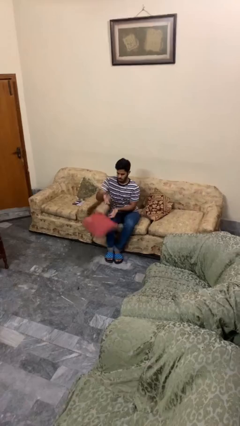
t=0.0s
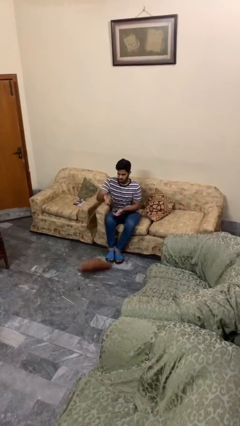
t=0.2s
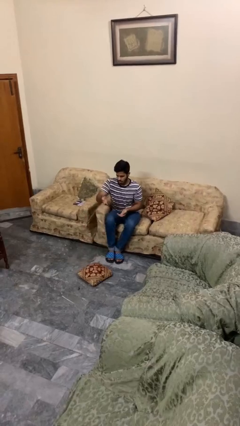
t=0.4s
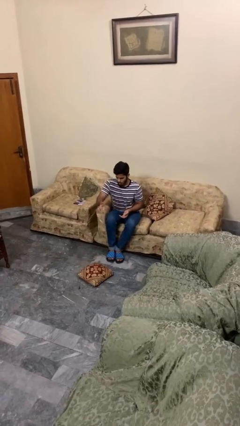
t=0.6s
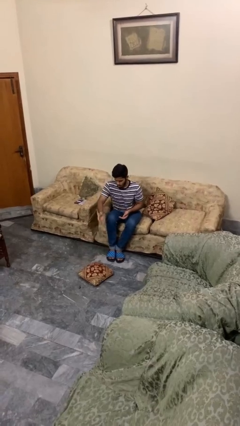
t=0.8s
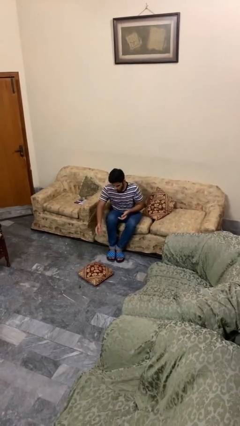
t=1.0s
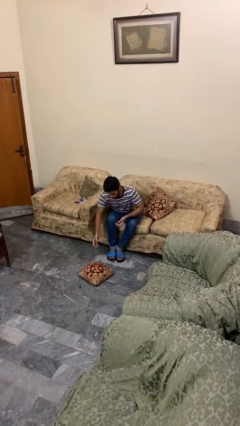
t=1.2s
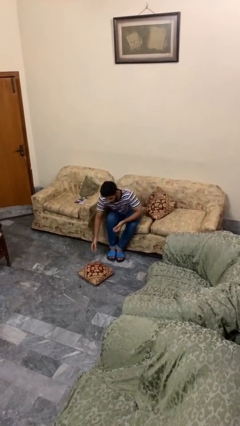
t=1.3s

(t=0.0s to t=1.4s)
person drops object

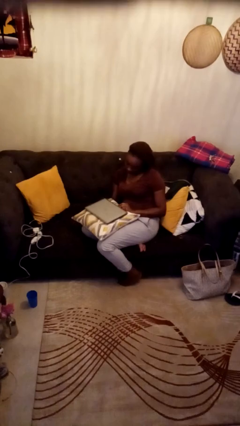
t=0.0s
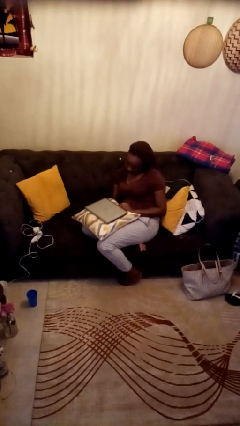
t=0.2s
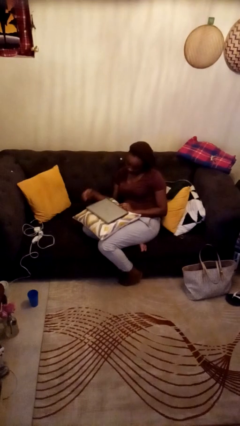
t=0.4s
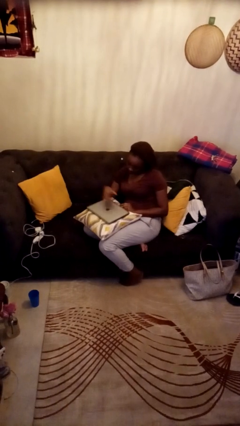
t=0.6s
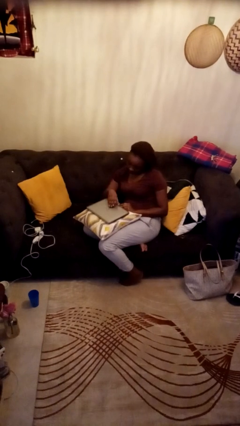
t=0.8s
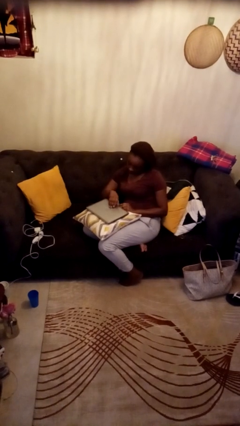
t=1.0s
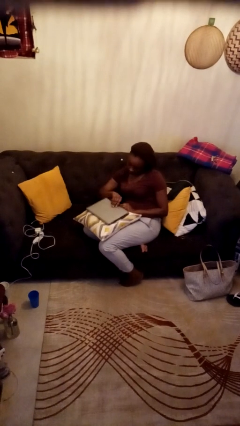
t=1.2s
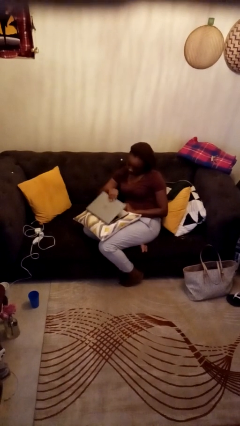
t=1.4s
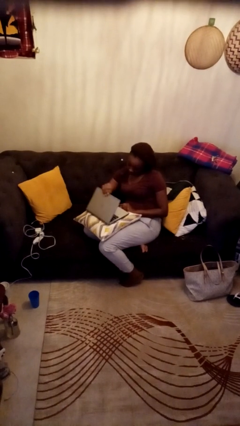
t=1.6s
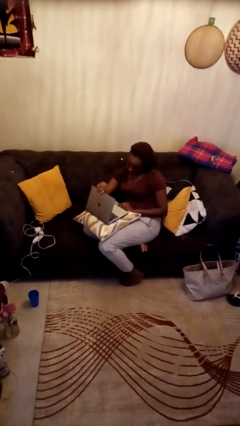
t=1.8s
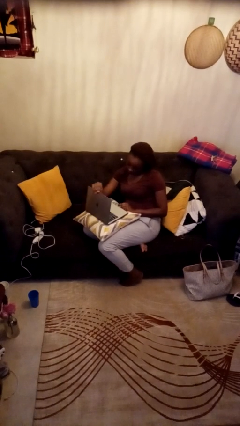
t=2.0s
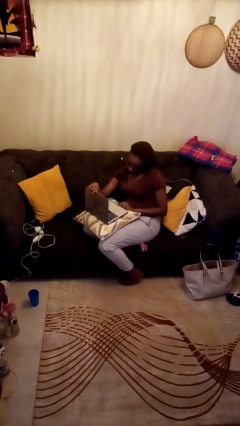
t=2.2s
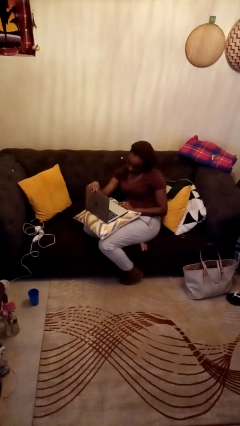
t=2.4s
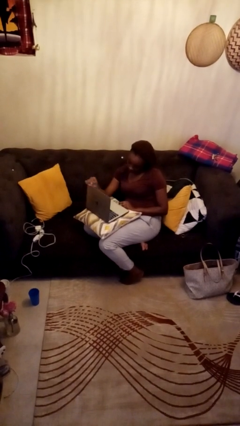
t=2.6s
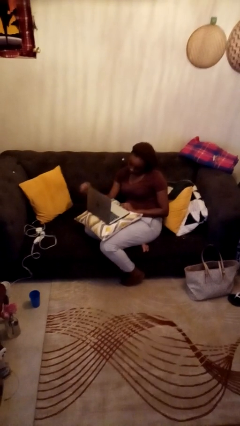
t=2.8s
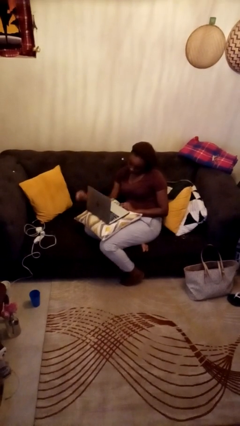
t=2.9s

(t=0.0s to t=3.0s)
person opens laptop

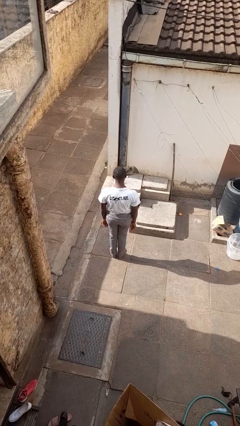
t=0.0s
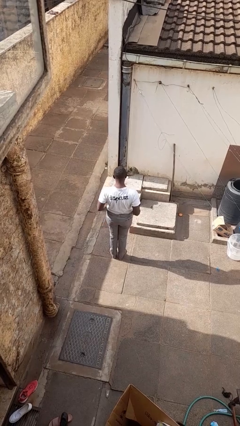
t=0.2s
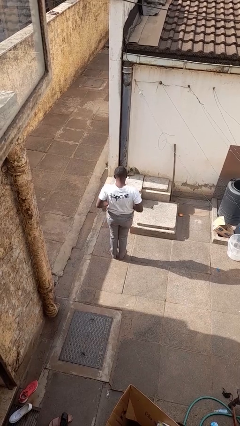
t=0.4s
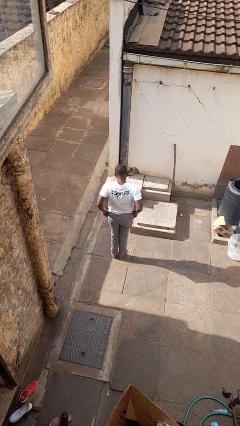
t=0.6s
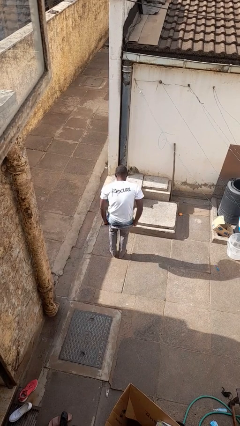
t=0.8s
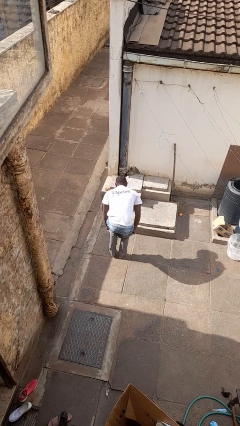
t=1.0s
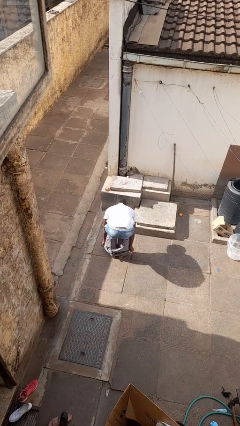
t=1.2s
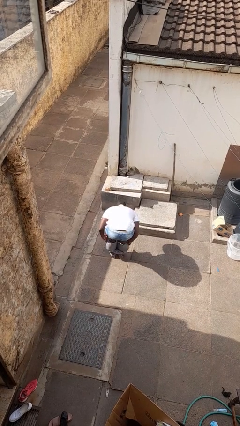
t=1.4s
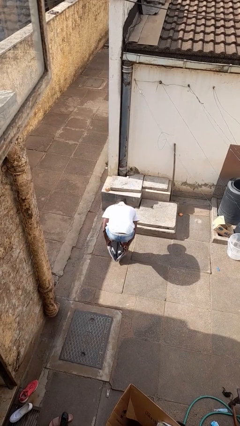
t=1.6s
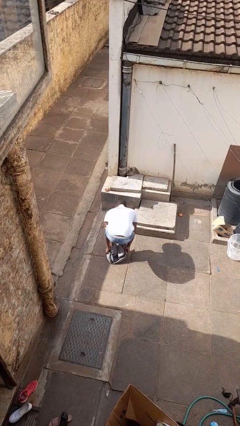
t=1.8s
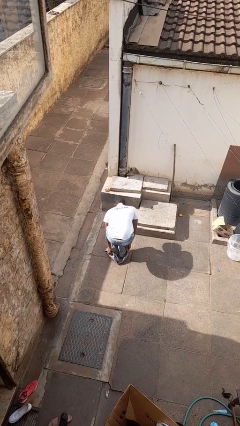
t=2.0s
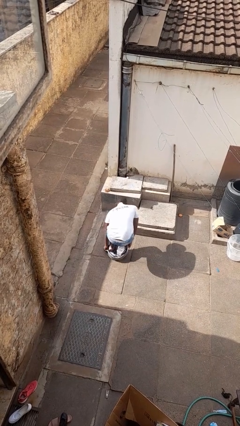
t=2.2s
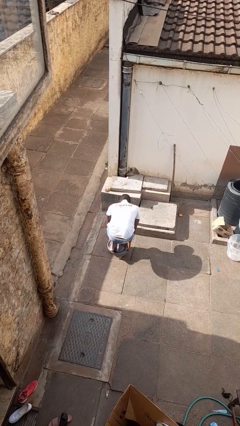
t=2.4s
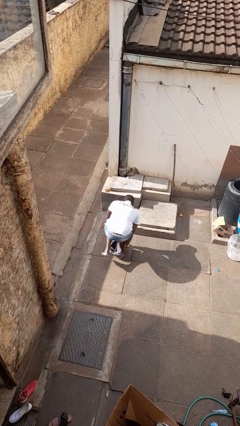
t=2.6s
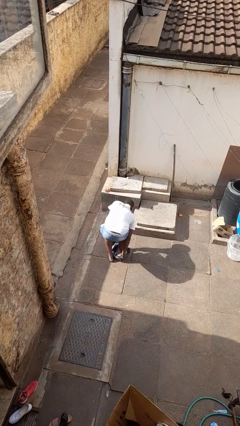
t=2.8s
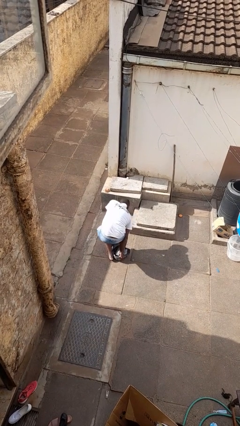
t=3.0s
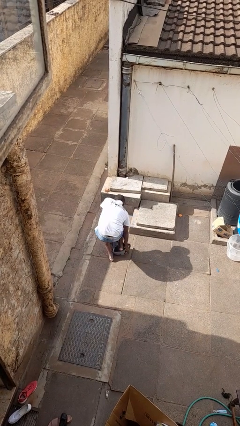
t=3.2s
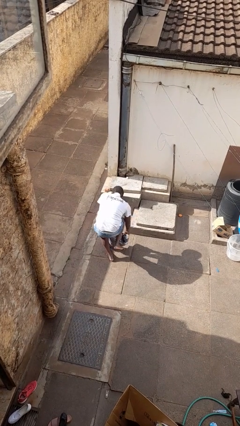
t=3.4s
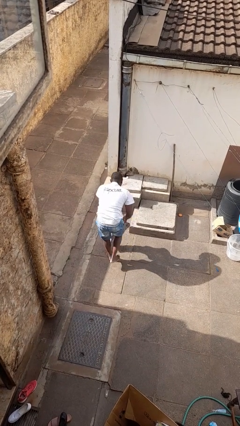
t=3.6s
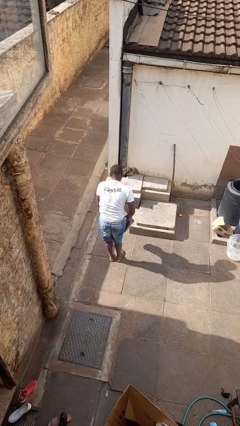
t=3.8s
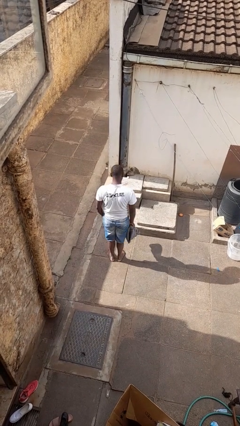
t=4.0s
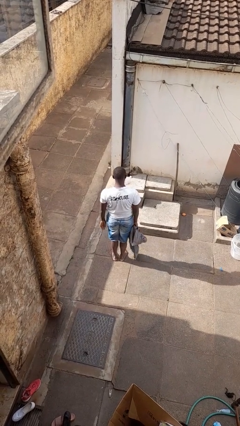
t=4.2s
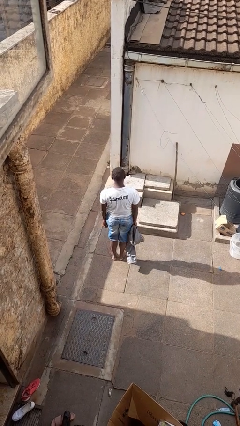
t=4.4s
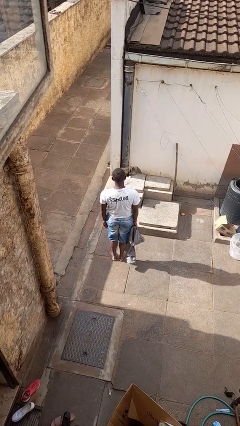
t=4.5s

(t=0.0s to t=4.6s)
person takes off pants

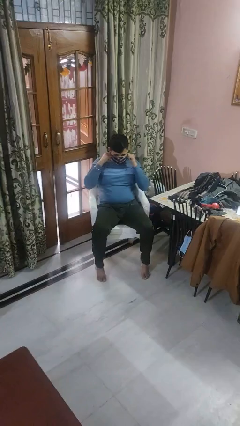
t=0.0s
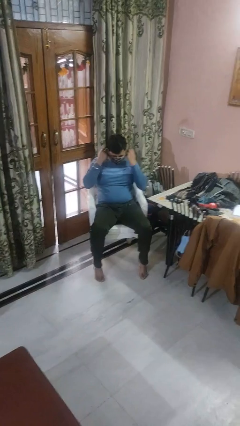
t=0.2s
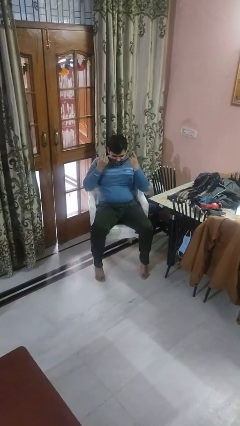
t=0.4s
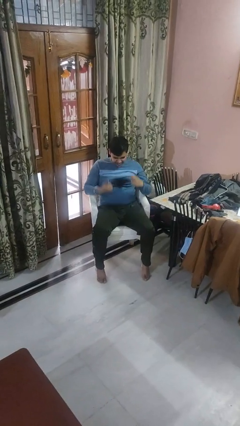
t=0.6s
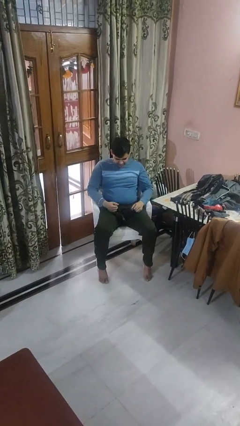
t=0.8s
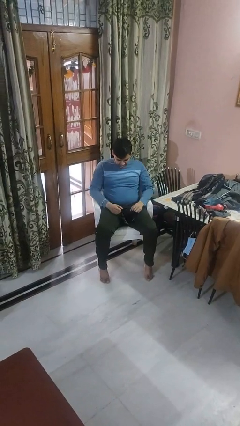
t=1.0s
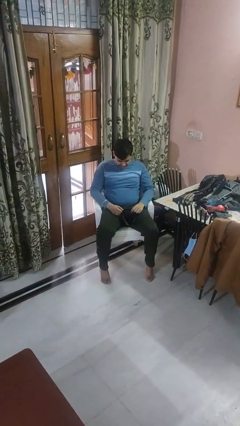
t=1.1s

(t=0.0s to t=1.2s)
person takes off facemask

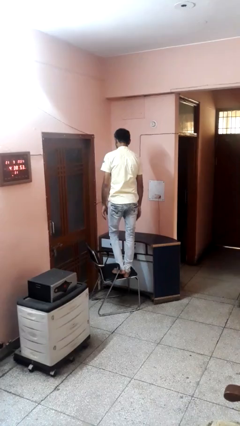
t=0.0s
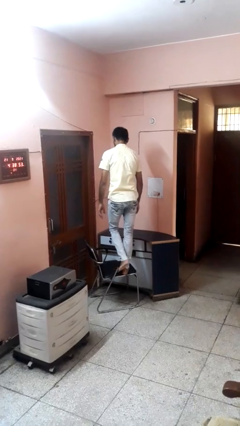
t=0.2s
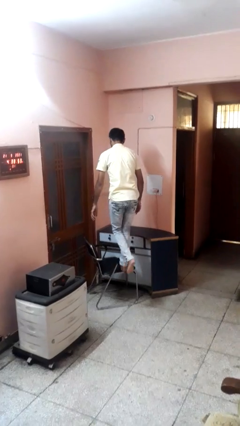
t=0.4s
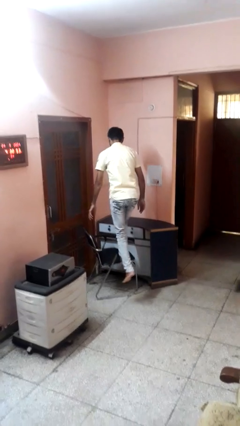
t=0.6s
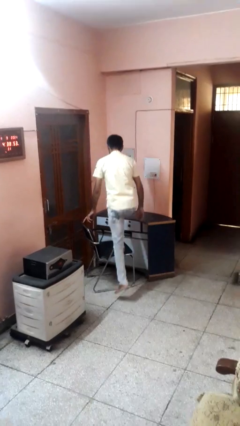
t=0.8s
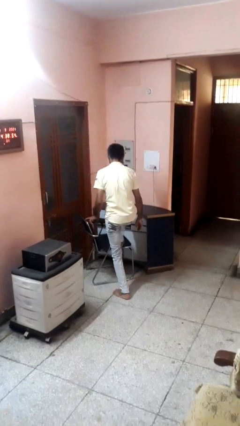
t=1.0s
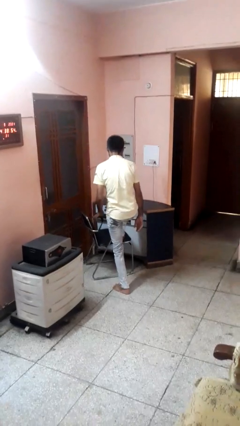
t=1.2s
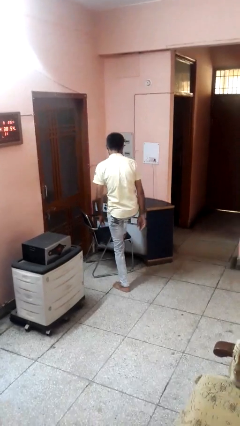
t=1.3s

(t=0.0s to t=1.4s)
person climbs off chair

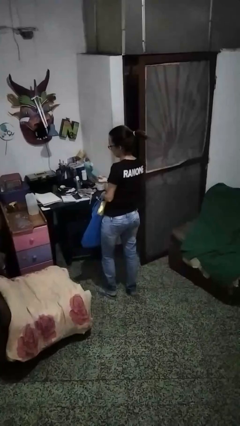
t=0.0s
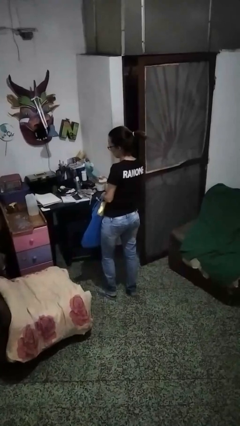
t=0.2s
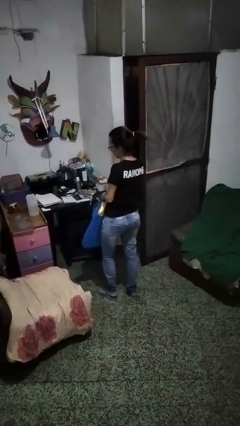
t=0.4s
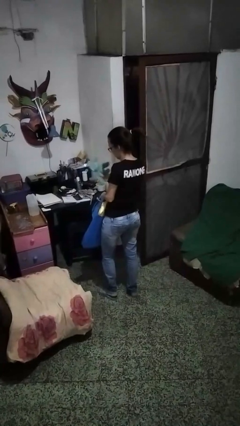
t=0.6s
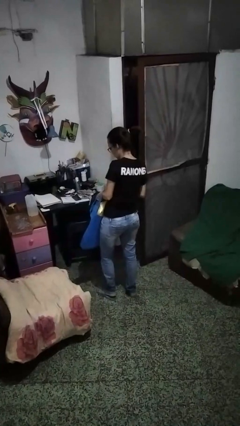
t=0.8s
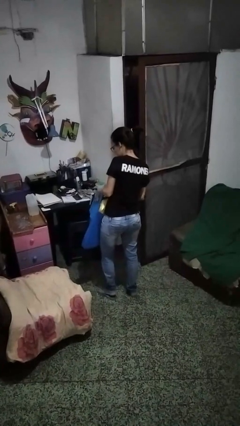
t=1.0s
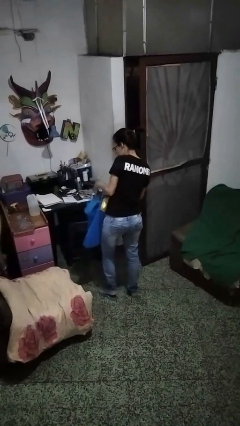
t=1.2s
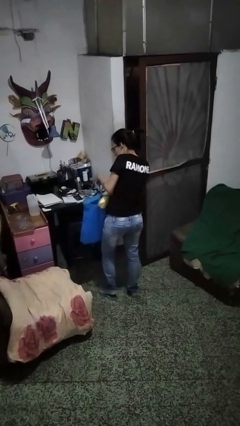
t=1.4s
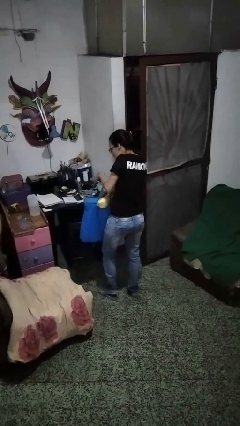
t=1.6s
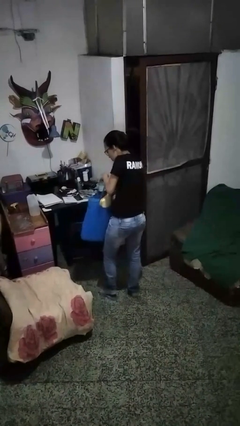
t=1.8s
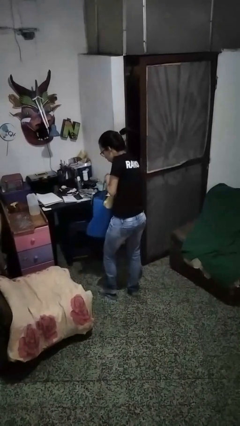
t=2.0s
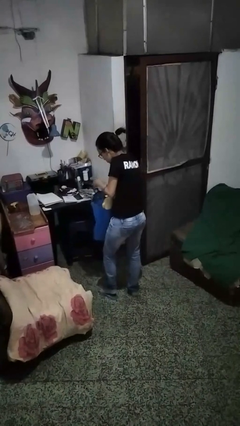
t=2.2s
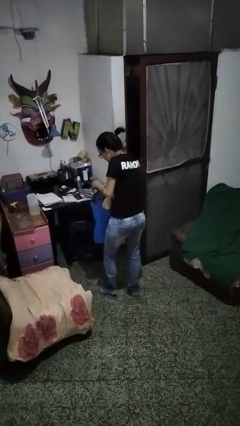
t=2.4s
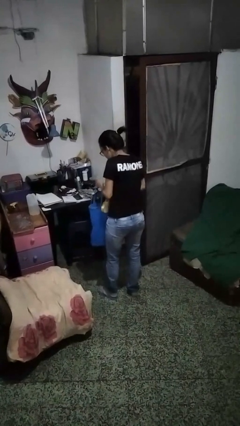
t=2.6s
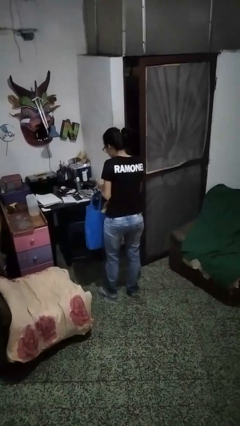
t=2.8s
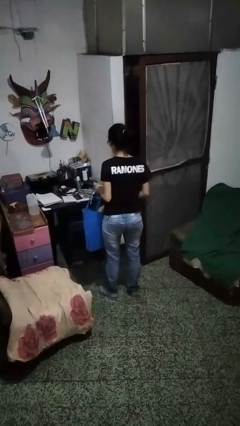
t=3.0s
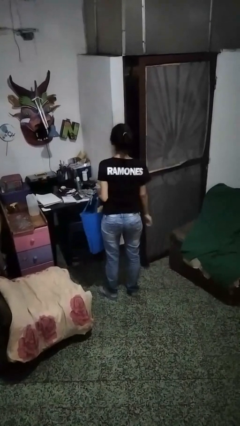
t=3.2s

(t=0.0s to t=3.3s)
person puts object into bag

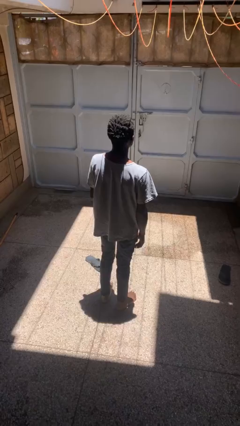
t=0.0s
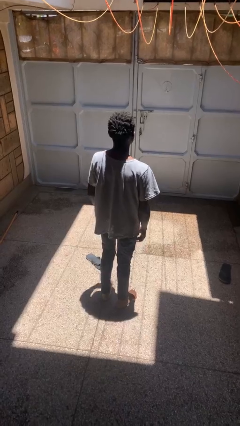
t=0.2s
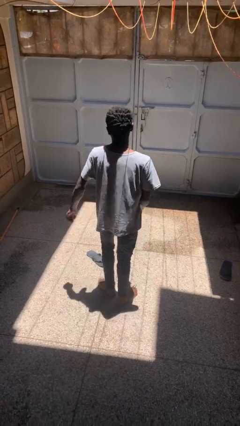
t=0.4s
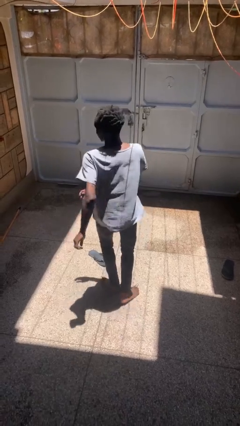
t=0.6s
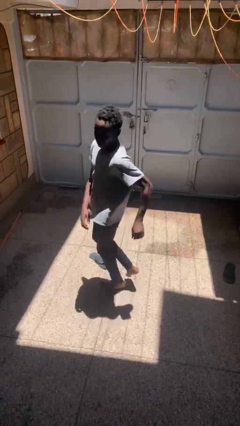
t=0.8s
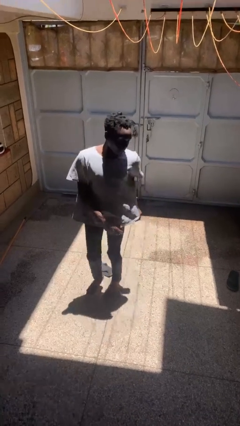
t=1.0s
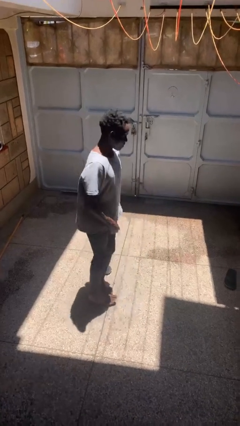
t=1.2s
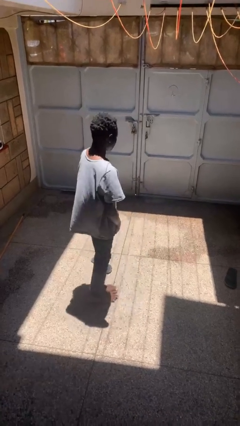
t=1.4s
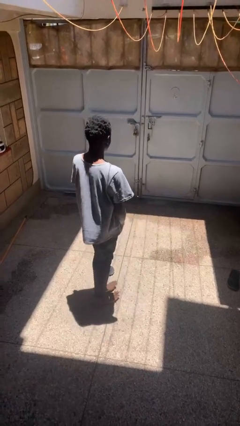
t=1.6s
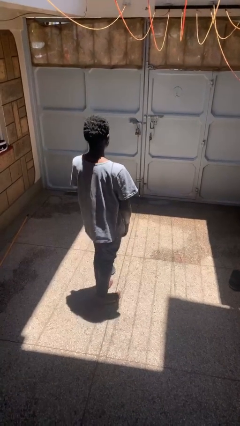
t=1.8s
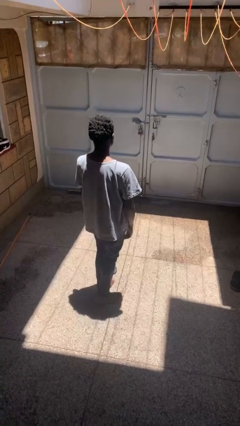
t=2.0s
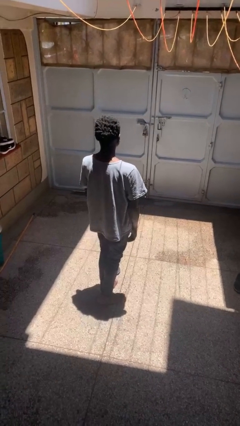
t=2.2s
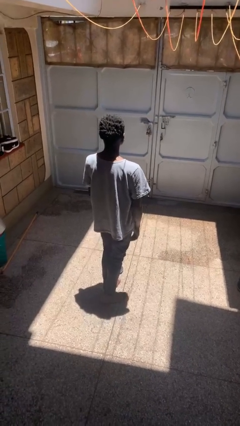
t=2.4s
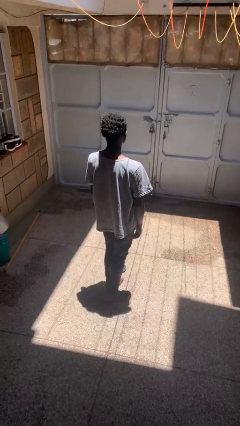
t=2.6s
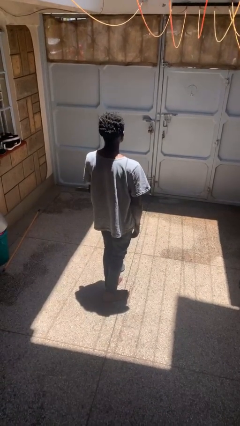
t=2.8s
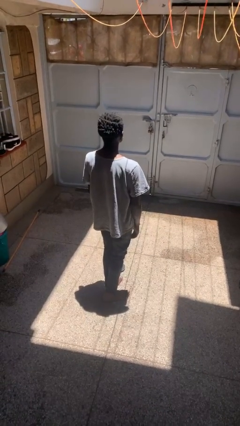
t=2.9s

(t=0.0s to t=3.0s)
person twirls
